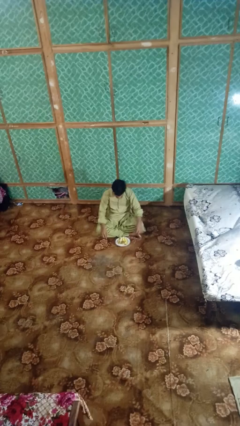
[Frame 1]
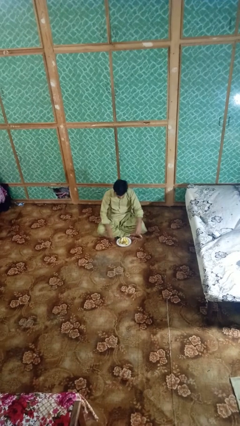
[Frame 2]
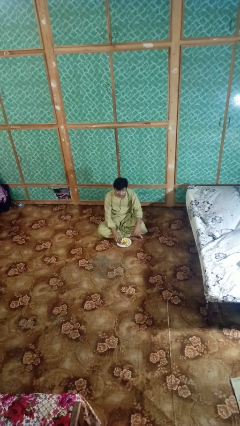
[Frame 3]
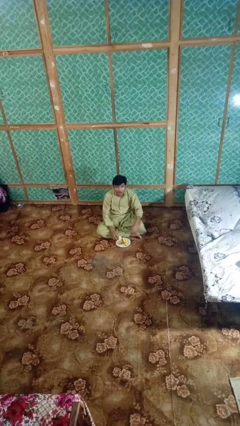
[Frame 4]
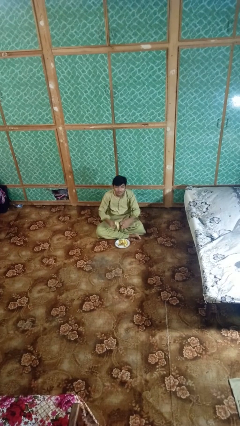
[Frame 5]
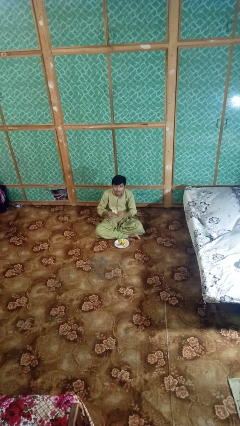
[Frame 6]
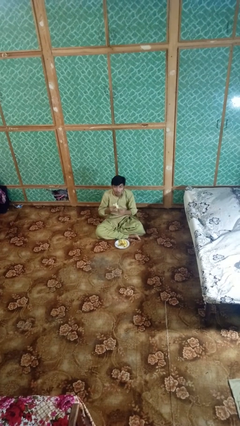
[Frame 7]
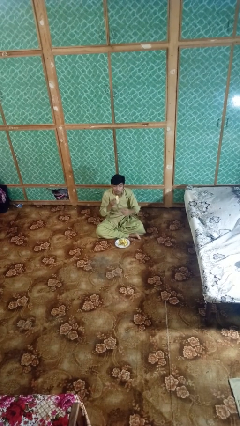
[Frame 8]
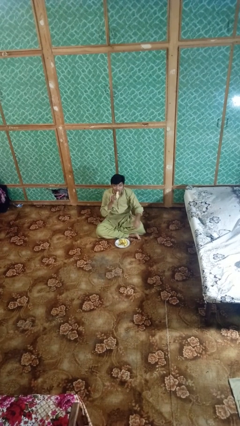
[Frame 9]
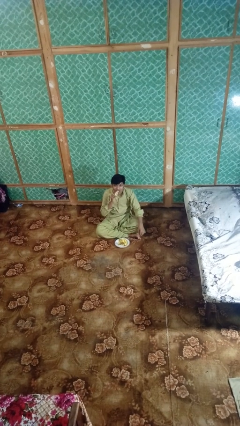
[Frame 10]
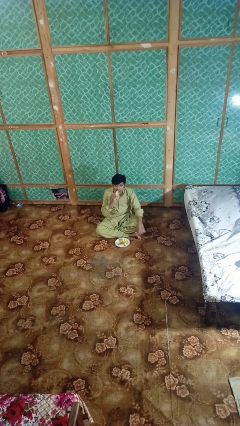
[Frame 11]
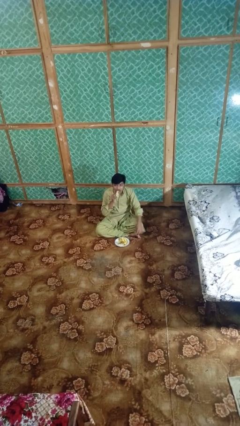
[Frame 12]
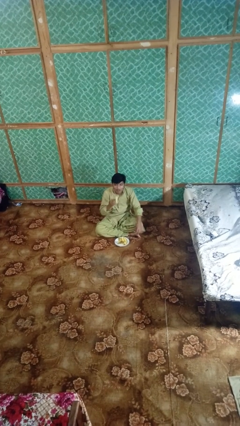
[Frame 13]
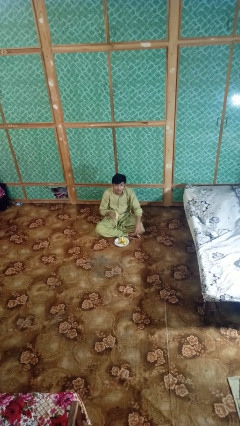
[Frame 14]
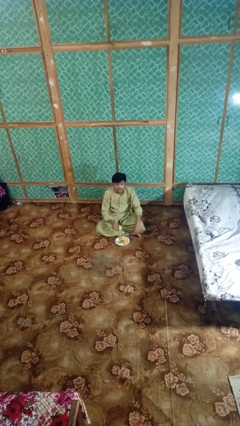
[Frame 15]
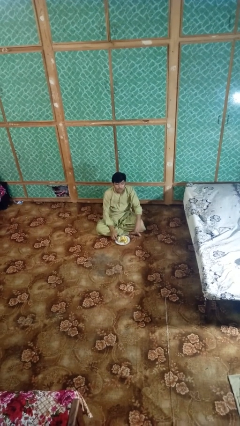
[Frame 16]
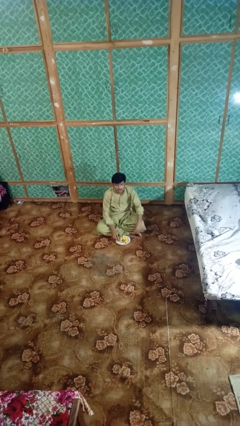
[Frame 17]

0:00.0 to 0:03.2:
person eats banana

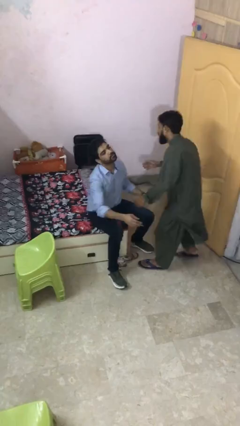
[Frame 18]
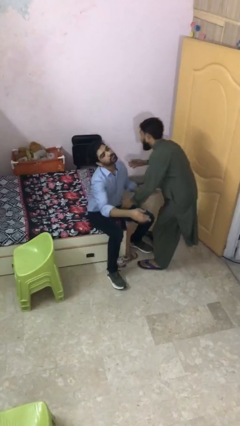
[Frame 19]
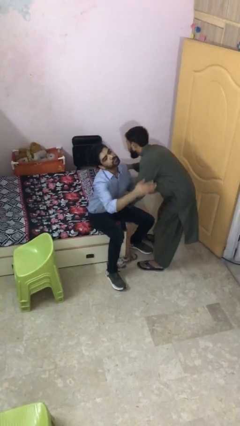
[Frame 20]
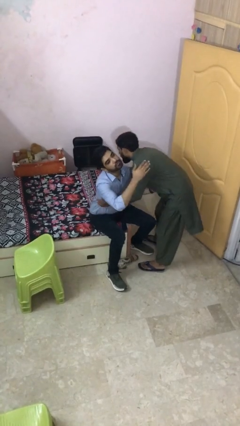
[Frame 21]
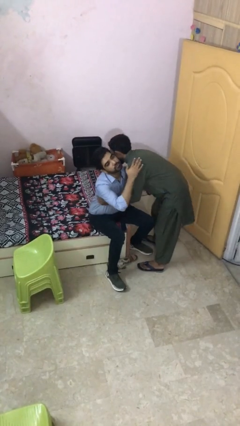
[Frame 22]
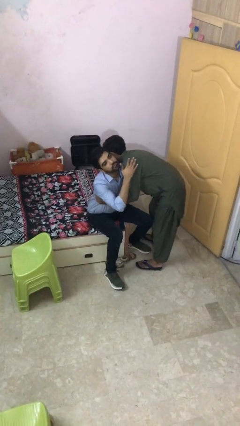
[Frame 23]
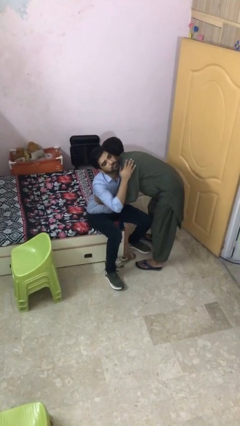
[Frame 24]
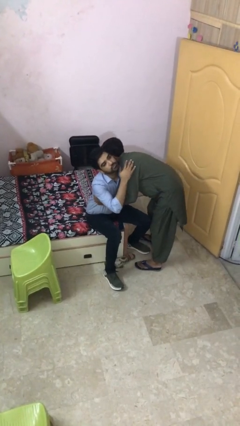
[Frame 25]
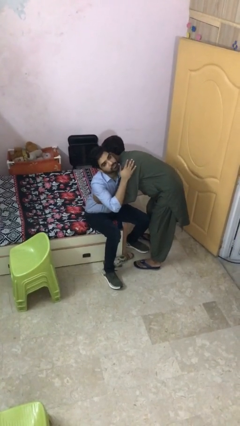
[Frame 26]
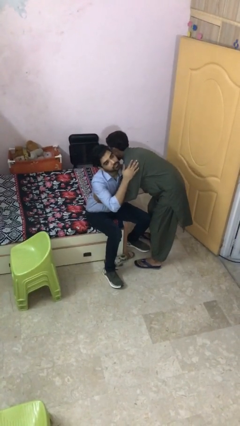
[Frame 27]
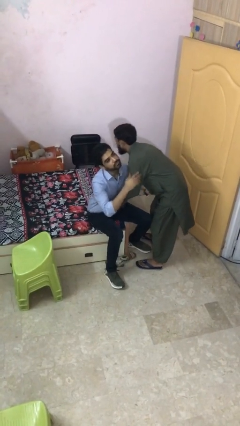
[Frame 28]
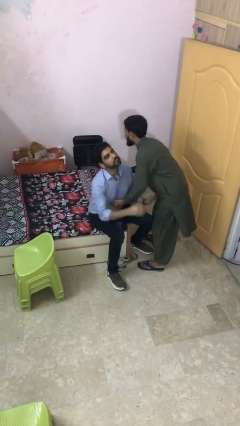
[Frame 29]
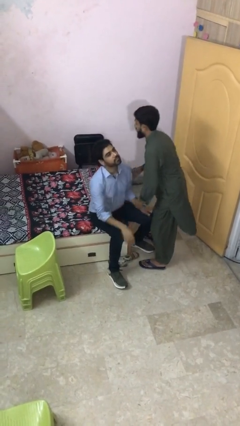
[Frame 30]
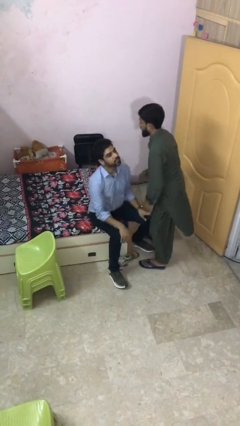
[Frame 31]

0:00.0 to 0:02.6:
person embraces person

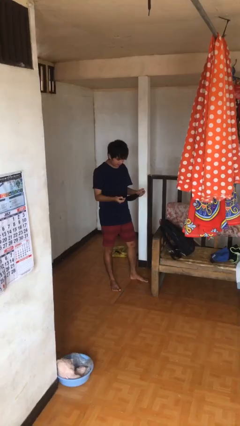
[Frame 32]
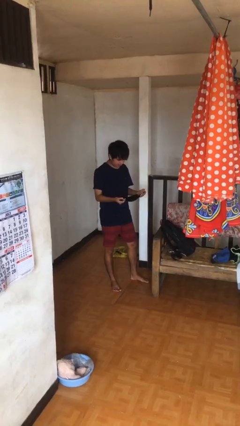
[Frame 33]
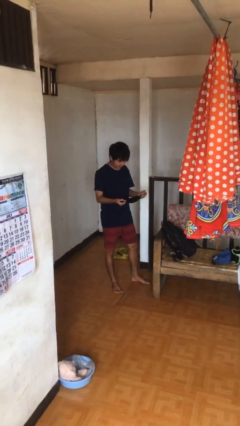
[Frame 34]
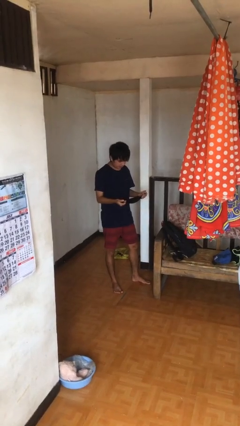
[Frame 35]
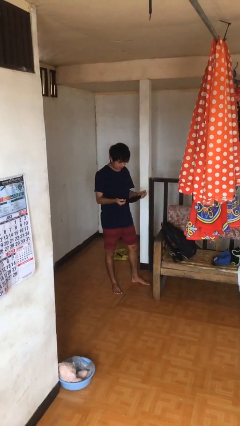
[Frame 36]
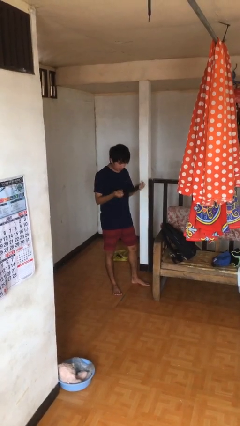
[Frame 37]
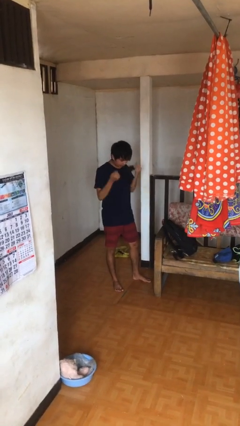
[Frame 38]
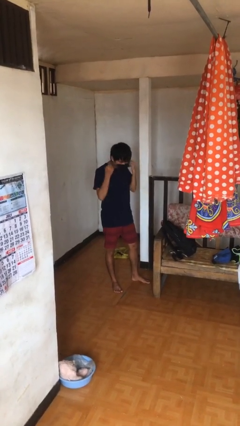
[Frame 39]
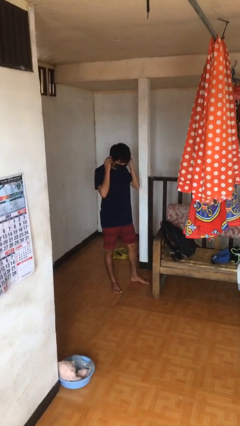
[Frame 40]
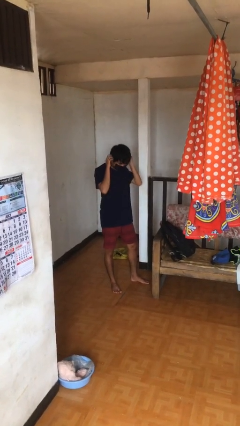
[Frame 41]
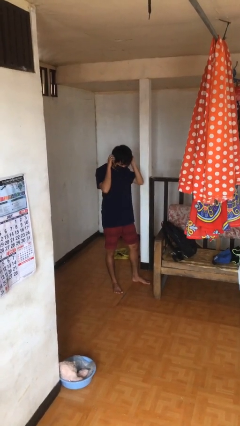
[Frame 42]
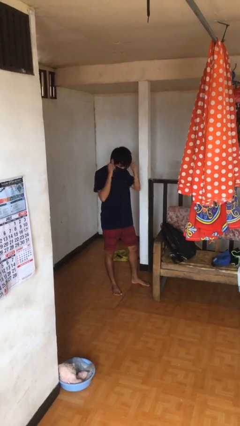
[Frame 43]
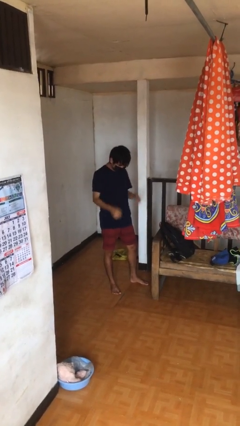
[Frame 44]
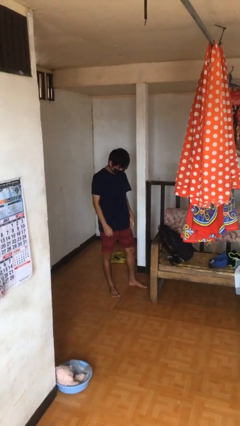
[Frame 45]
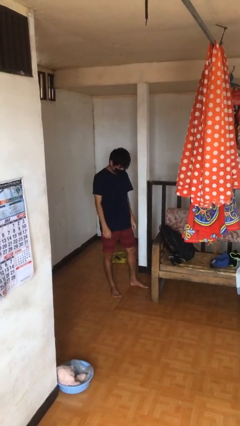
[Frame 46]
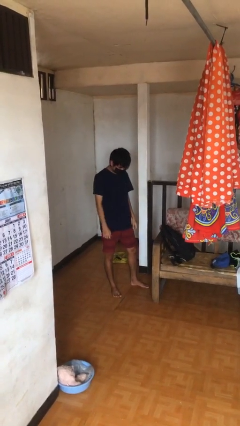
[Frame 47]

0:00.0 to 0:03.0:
person puts on facemask

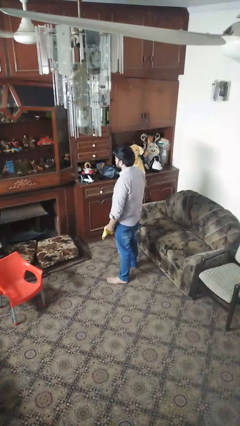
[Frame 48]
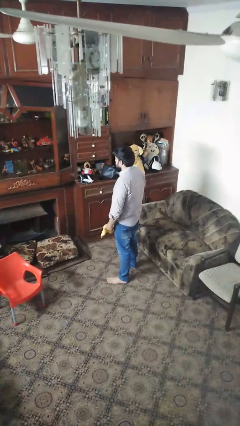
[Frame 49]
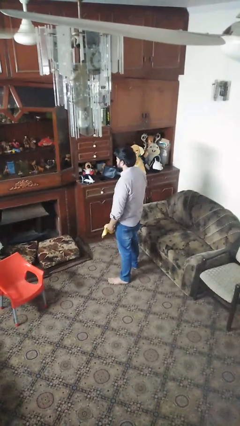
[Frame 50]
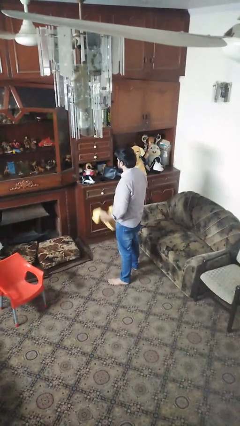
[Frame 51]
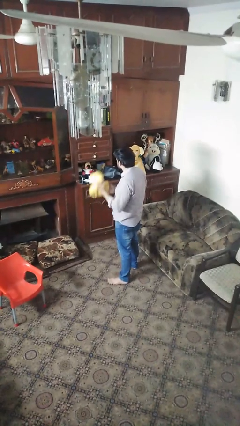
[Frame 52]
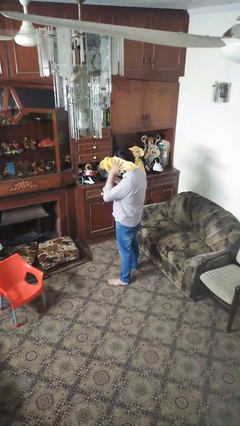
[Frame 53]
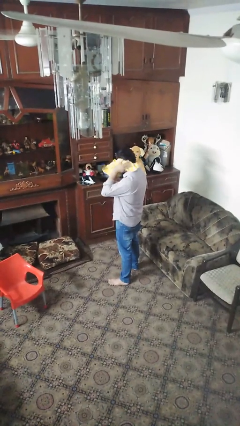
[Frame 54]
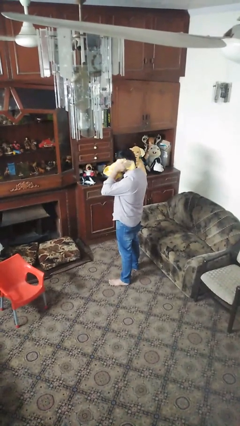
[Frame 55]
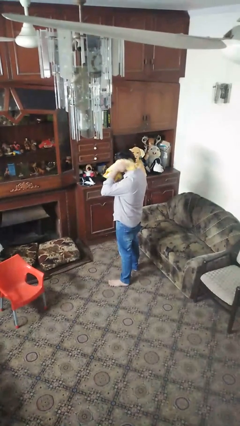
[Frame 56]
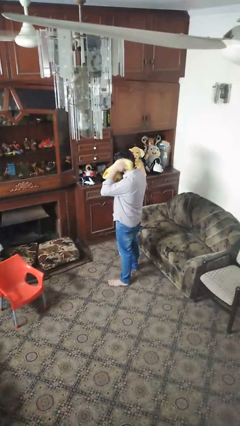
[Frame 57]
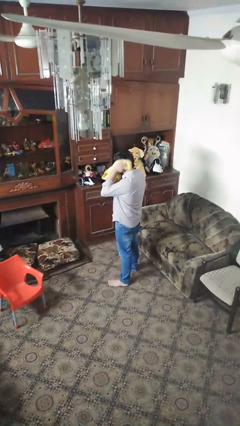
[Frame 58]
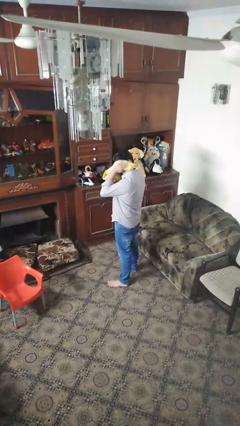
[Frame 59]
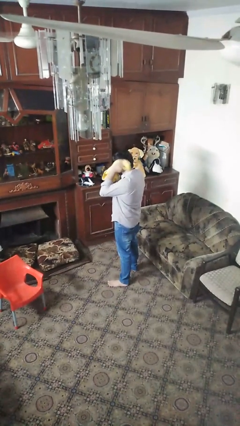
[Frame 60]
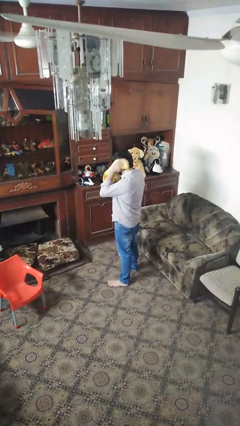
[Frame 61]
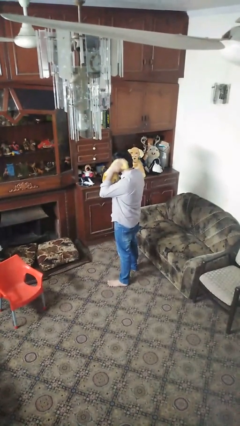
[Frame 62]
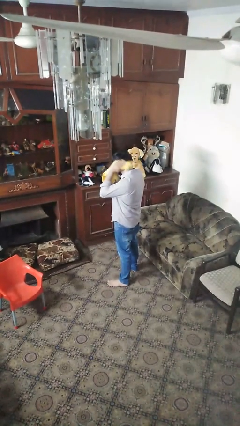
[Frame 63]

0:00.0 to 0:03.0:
person dries hair with towel

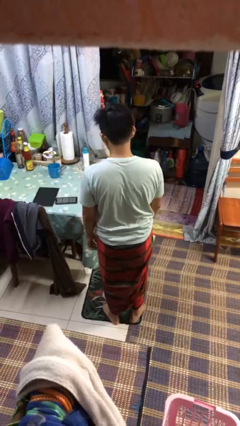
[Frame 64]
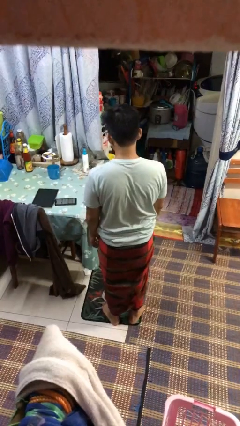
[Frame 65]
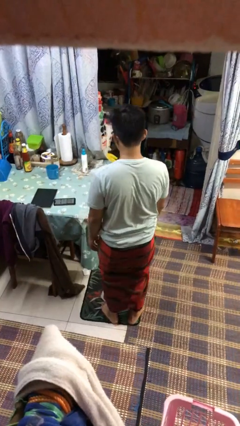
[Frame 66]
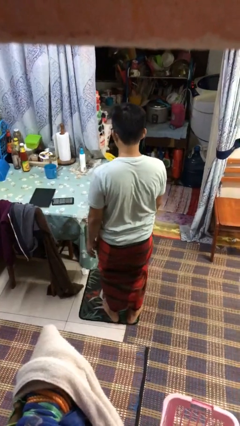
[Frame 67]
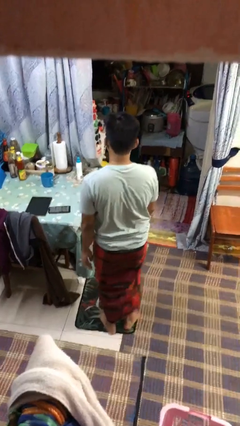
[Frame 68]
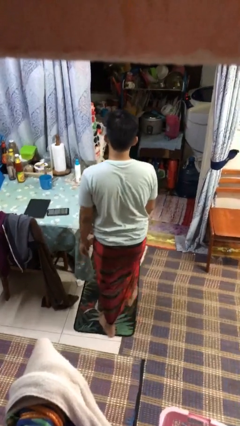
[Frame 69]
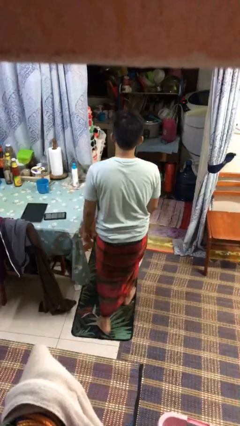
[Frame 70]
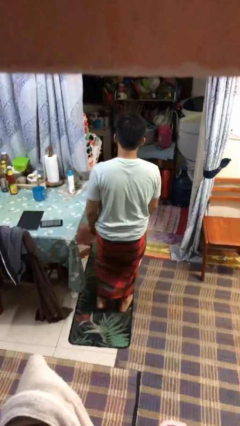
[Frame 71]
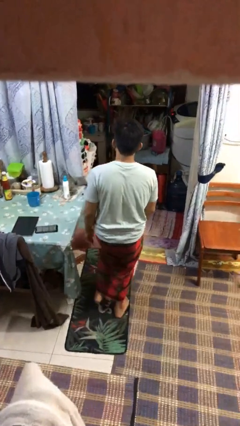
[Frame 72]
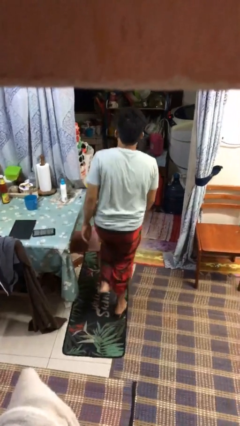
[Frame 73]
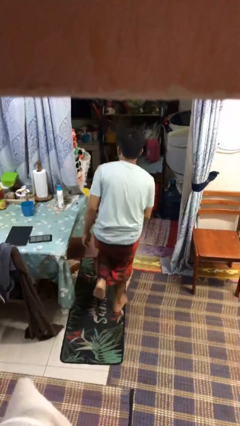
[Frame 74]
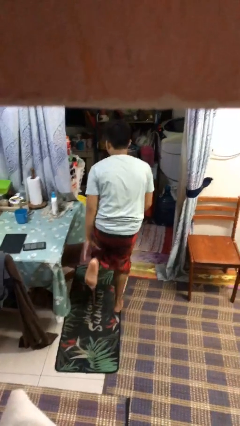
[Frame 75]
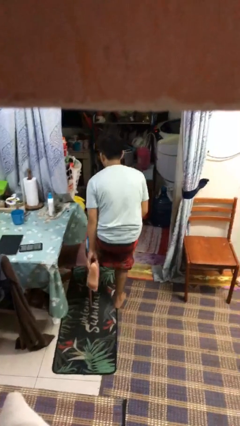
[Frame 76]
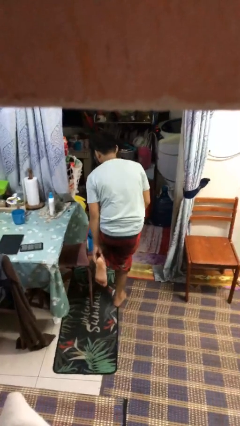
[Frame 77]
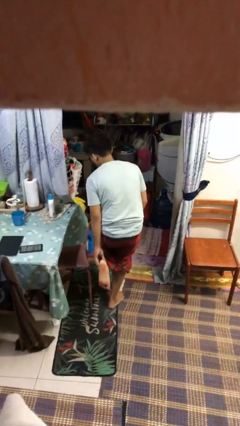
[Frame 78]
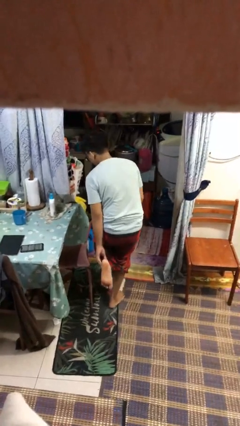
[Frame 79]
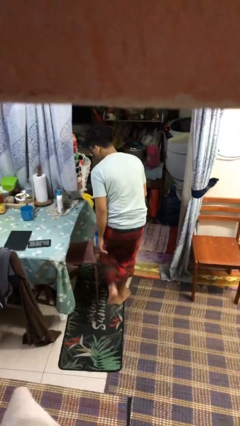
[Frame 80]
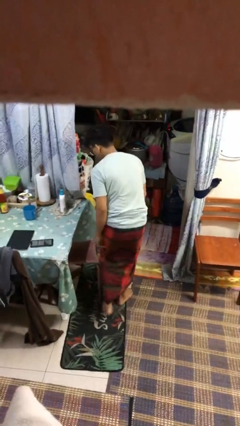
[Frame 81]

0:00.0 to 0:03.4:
person stubs toe

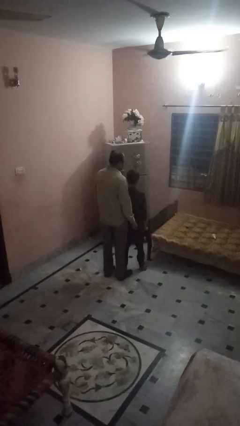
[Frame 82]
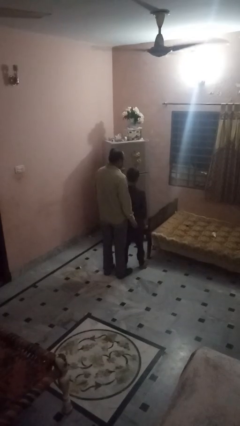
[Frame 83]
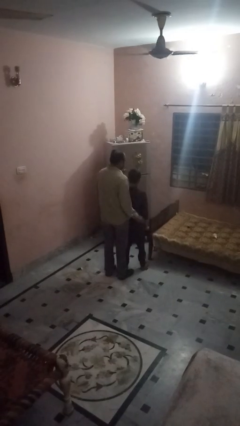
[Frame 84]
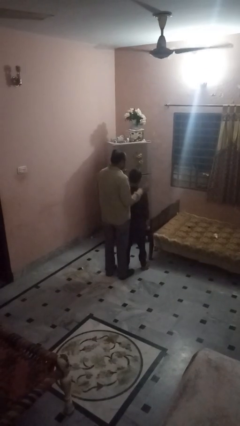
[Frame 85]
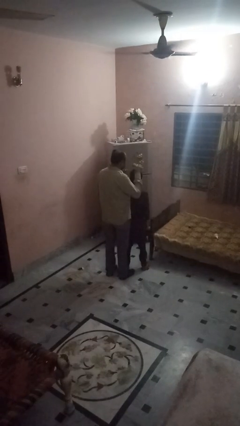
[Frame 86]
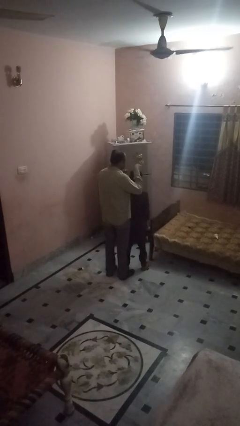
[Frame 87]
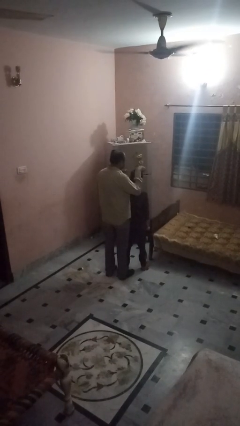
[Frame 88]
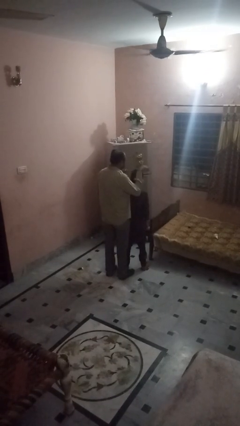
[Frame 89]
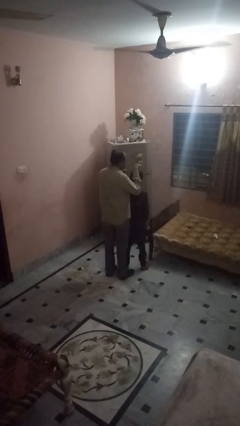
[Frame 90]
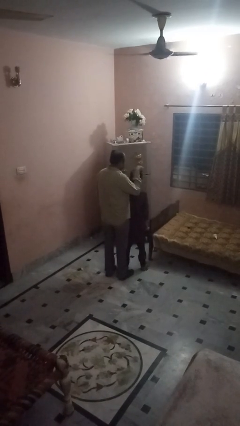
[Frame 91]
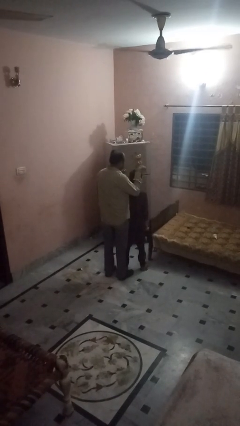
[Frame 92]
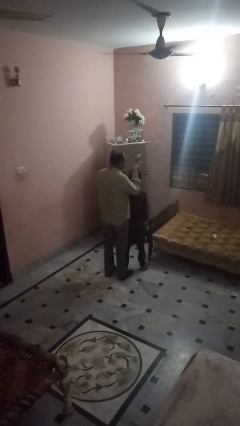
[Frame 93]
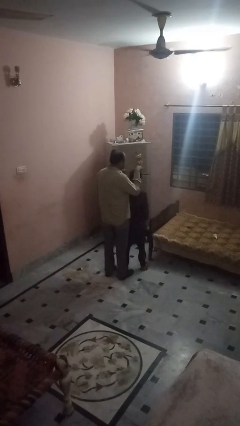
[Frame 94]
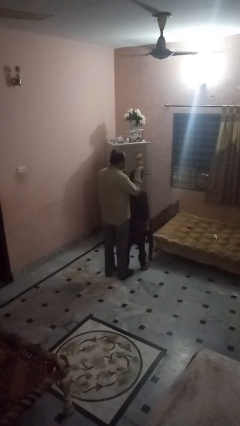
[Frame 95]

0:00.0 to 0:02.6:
person brushes hair of person
